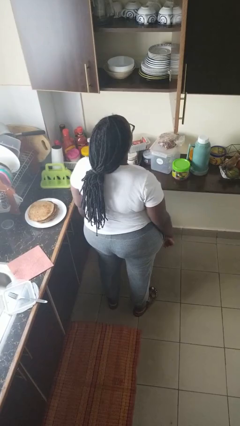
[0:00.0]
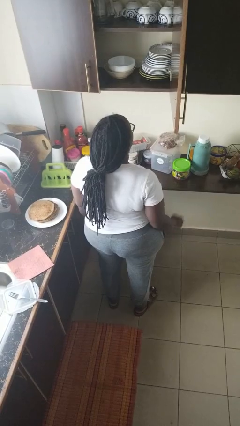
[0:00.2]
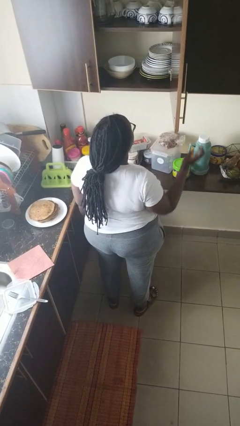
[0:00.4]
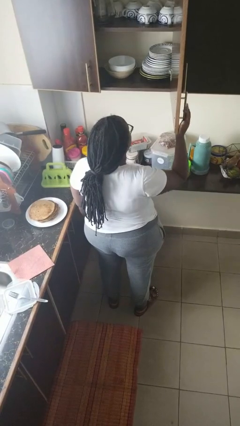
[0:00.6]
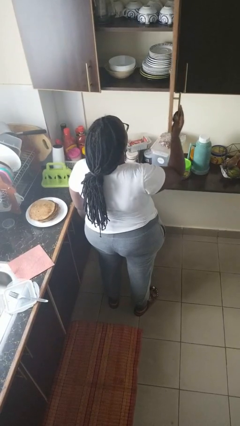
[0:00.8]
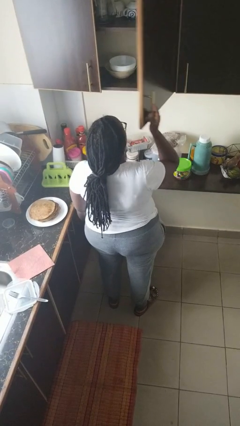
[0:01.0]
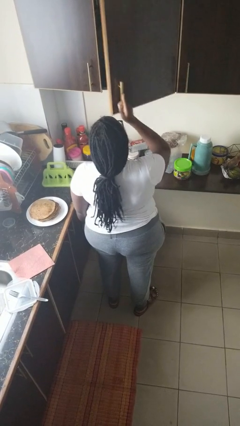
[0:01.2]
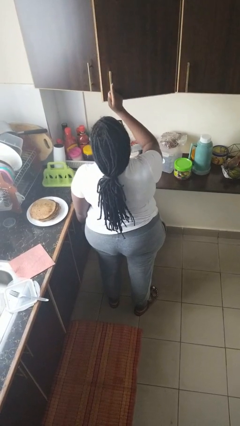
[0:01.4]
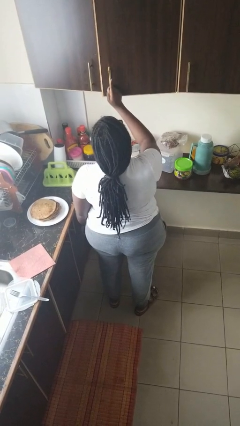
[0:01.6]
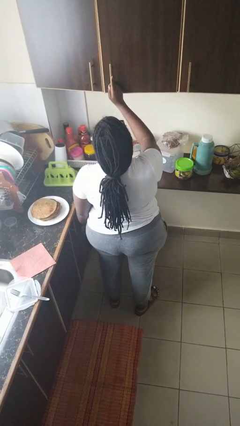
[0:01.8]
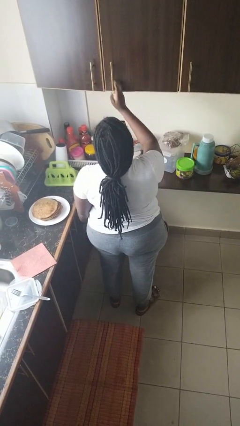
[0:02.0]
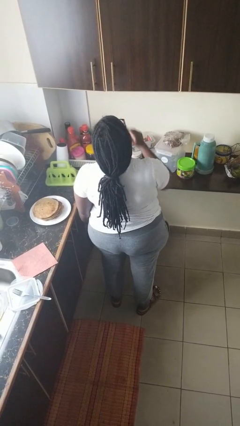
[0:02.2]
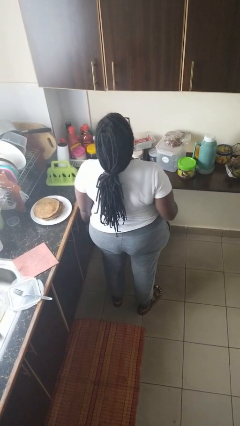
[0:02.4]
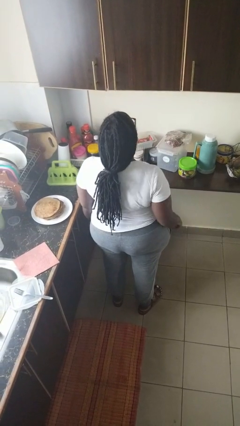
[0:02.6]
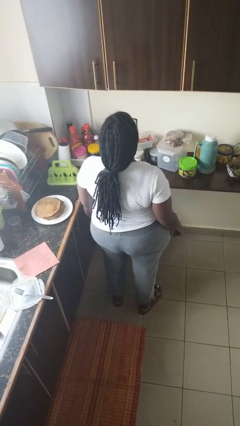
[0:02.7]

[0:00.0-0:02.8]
person closes cabinet

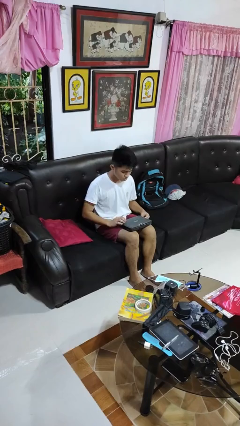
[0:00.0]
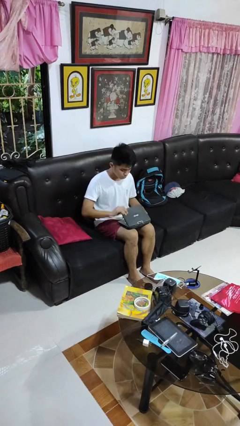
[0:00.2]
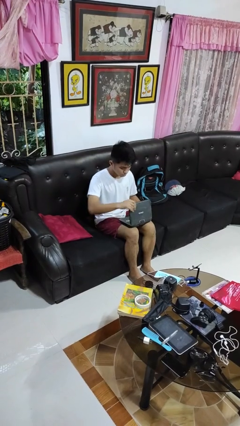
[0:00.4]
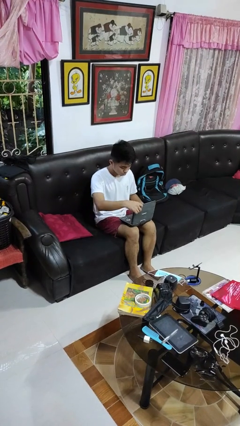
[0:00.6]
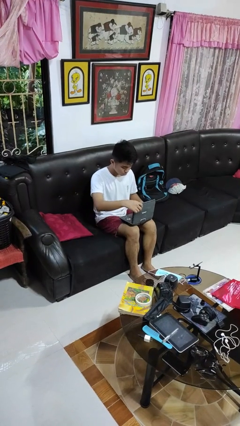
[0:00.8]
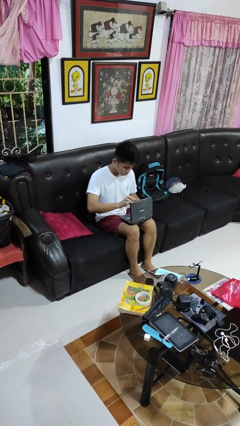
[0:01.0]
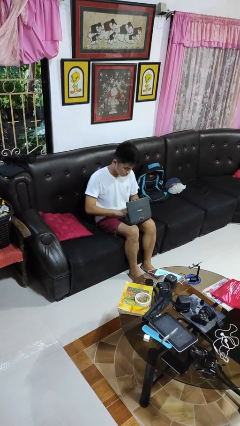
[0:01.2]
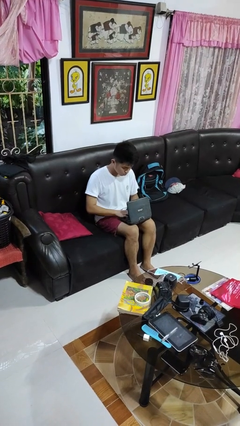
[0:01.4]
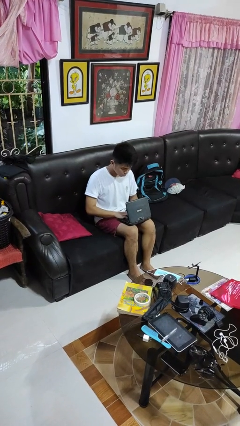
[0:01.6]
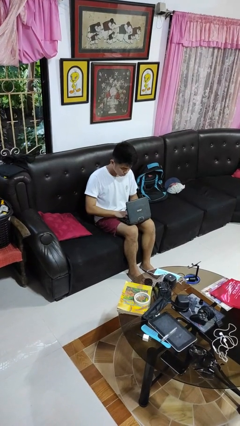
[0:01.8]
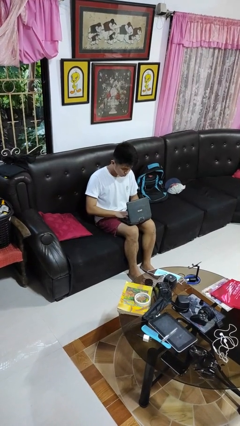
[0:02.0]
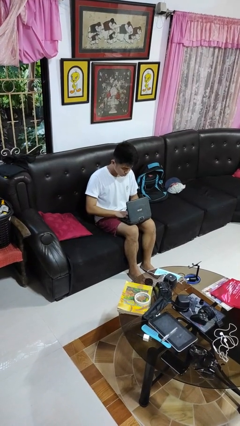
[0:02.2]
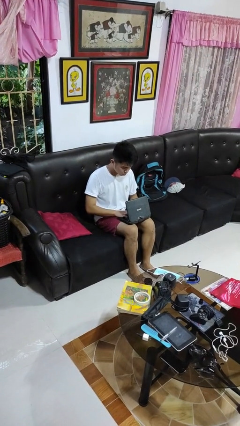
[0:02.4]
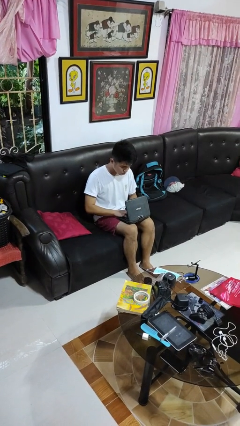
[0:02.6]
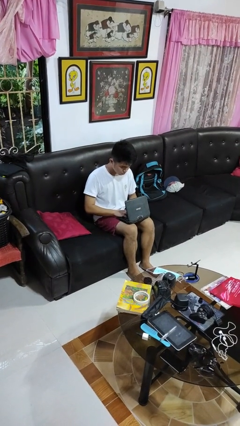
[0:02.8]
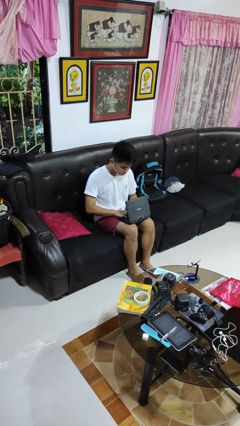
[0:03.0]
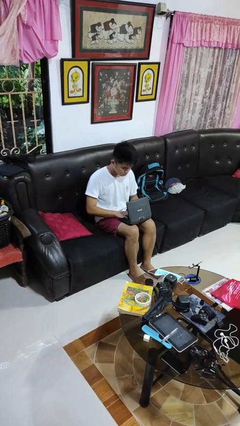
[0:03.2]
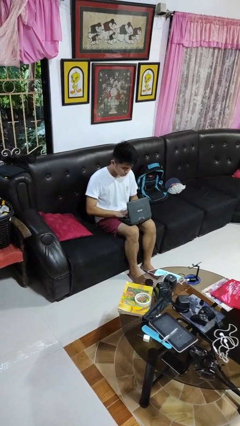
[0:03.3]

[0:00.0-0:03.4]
person opens laptop

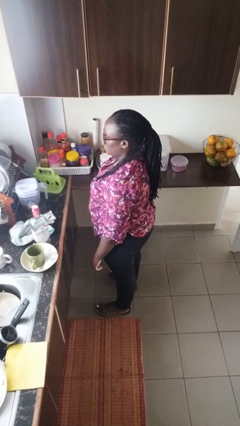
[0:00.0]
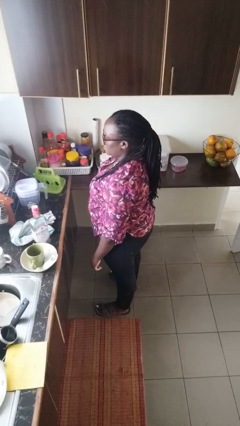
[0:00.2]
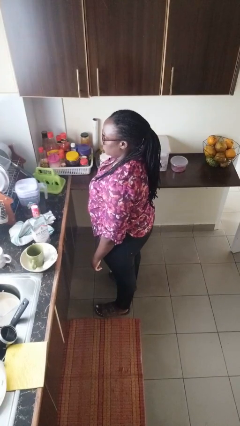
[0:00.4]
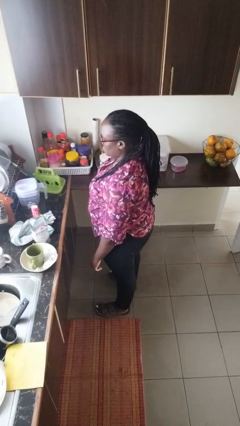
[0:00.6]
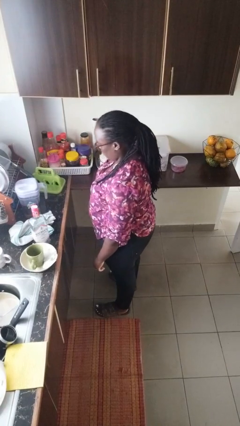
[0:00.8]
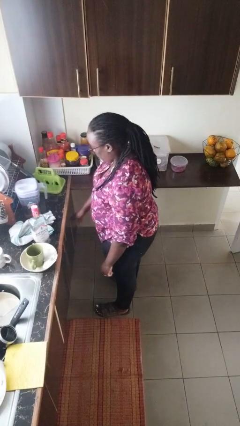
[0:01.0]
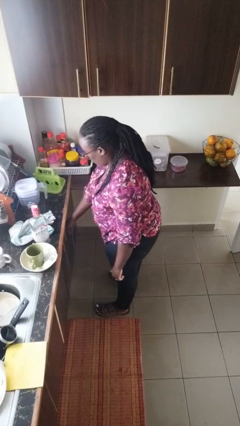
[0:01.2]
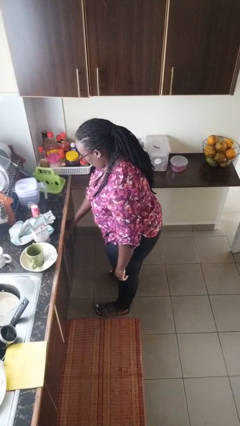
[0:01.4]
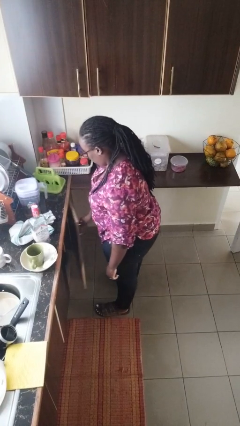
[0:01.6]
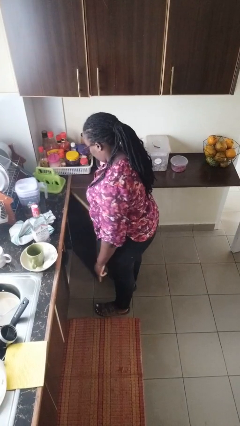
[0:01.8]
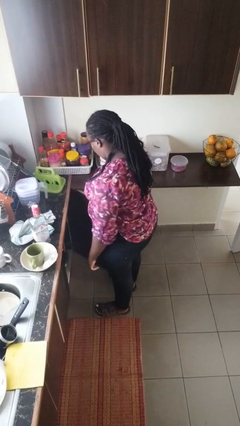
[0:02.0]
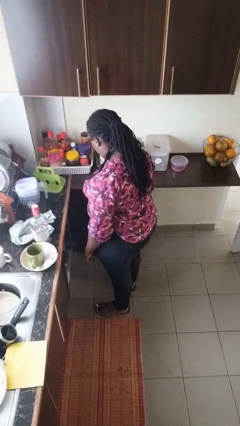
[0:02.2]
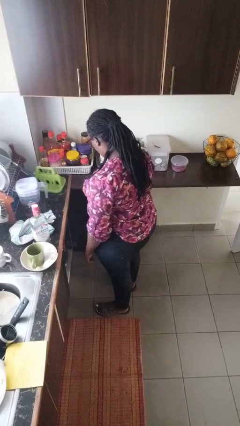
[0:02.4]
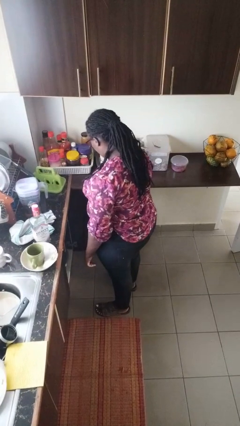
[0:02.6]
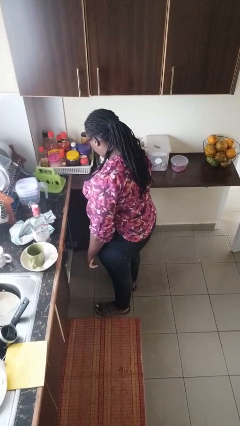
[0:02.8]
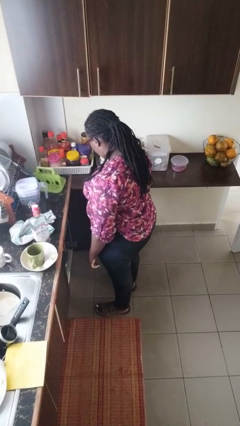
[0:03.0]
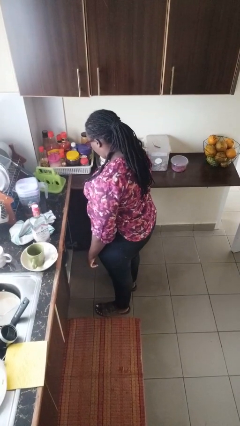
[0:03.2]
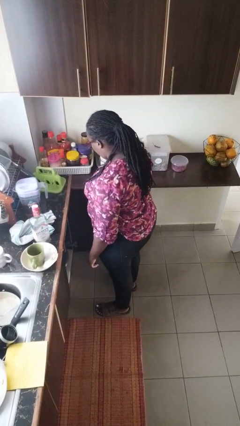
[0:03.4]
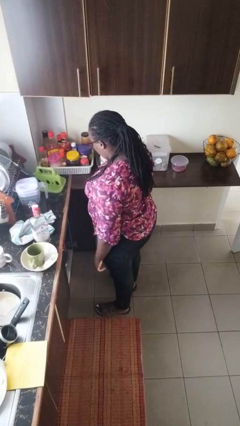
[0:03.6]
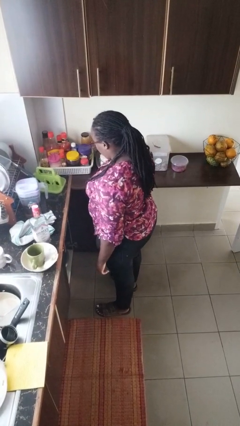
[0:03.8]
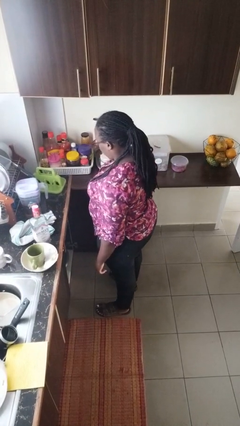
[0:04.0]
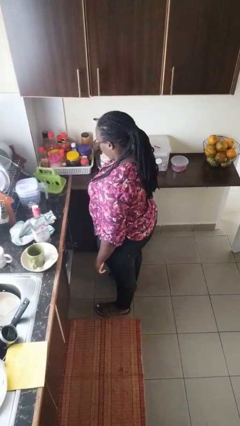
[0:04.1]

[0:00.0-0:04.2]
person opens cabinet

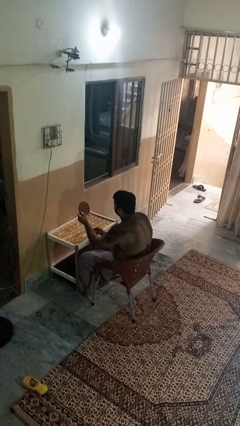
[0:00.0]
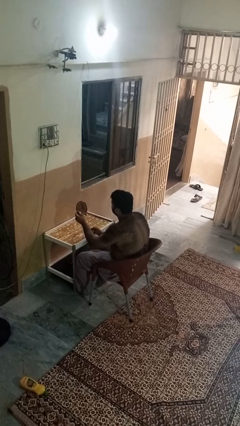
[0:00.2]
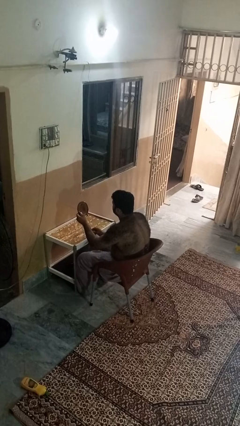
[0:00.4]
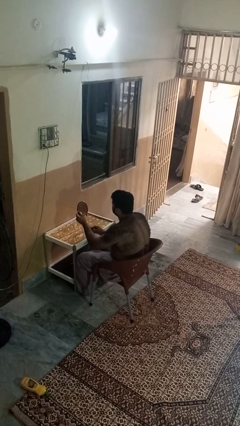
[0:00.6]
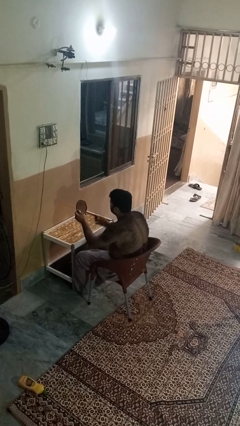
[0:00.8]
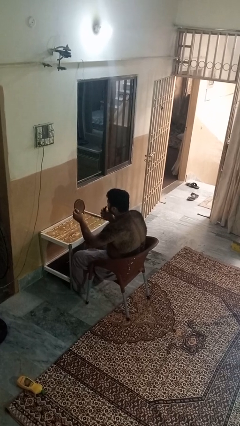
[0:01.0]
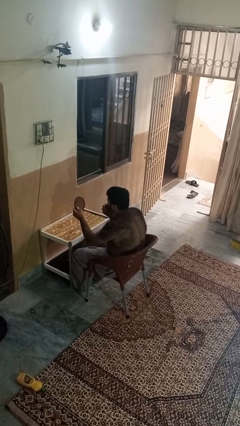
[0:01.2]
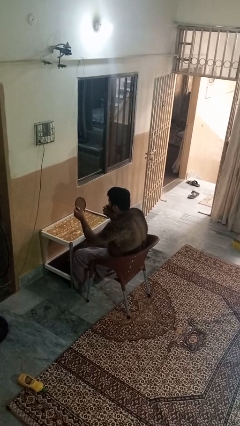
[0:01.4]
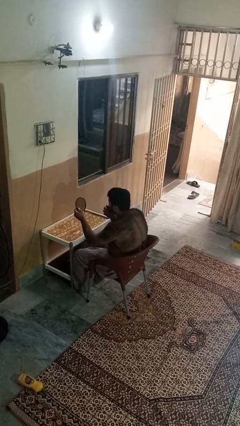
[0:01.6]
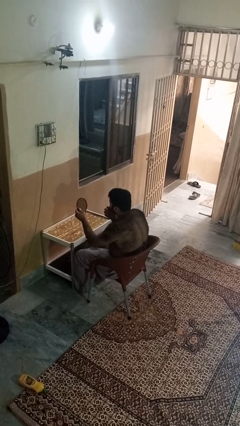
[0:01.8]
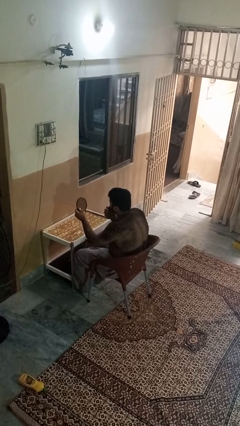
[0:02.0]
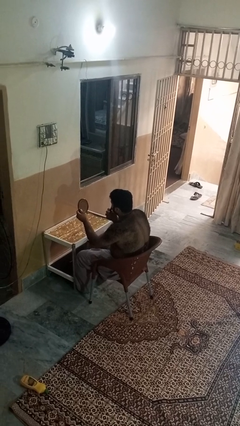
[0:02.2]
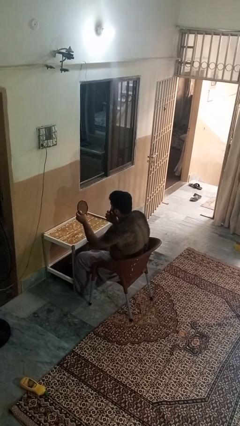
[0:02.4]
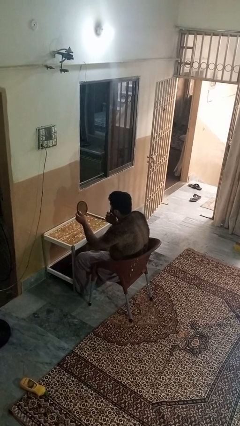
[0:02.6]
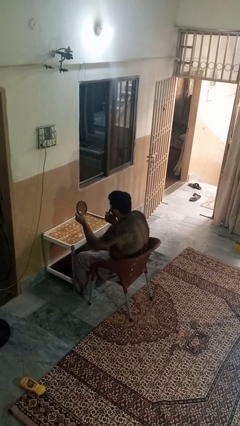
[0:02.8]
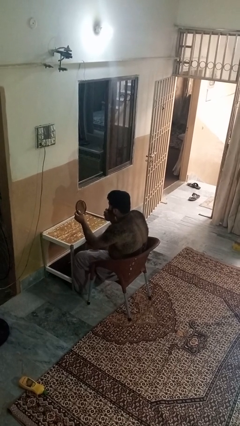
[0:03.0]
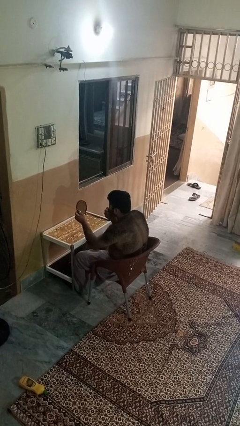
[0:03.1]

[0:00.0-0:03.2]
person applies lip makeup

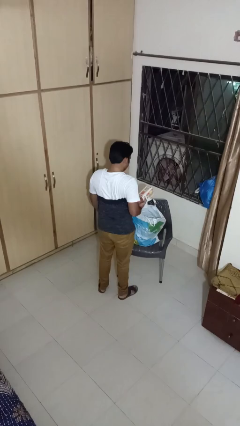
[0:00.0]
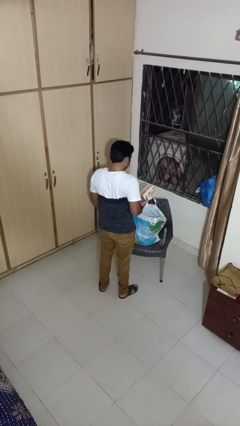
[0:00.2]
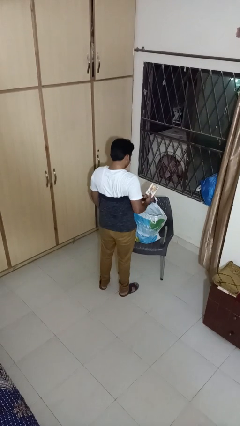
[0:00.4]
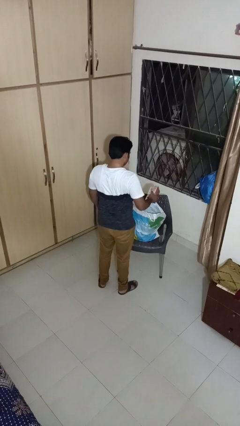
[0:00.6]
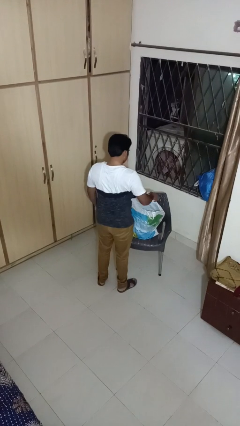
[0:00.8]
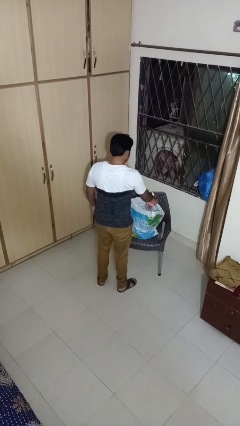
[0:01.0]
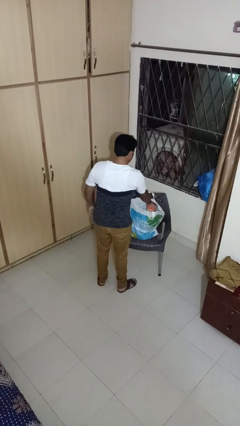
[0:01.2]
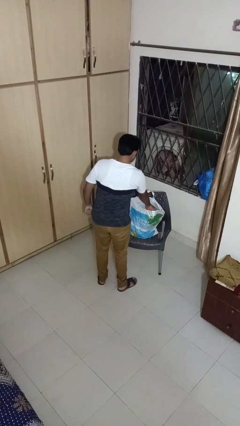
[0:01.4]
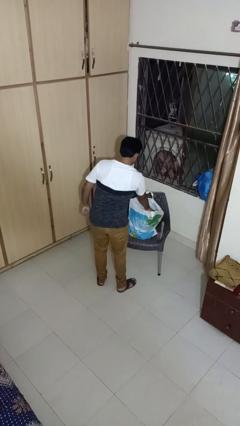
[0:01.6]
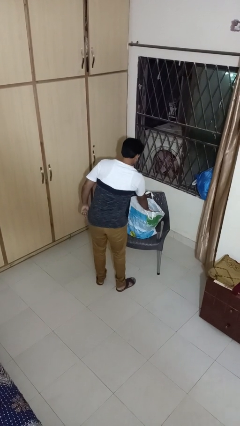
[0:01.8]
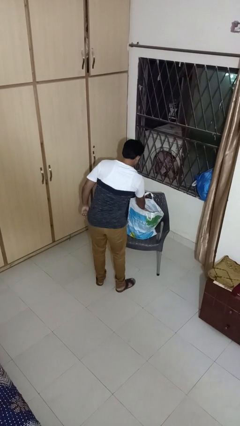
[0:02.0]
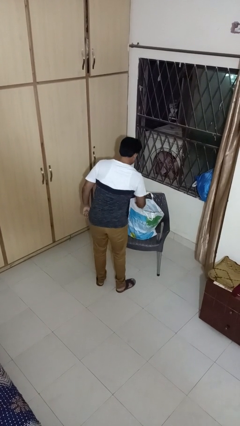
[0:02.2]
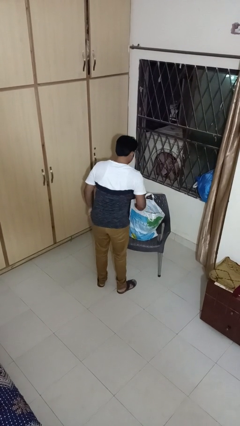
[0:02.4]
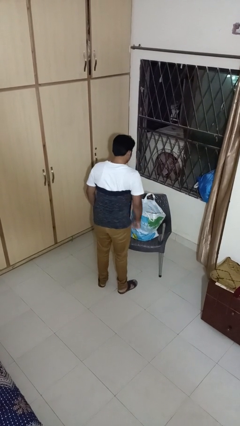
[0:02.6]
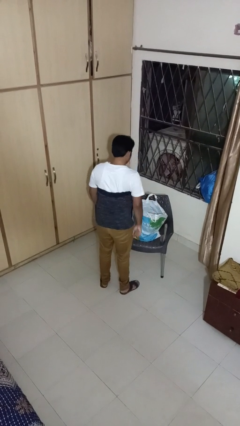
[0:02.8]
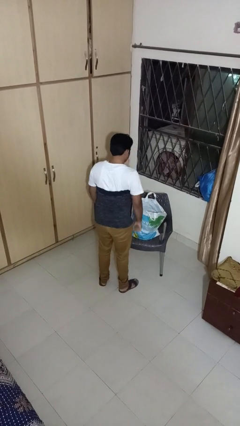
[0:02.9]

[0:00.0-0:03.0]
person puts object into bag

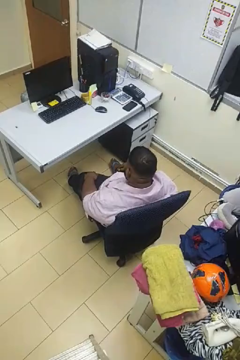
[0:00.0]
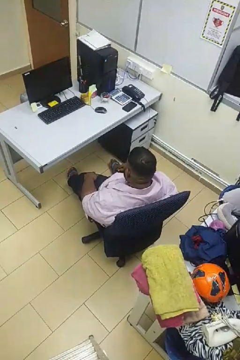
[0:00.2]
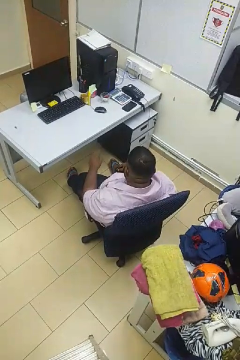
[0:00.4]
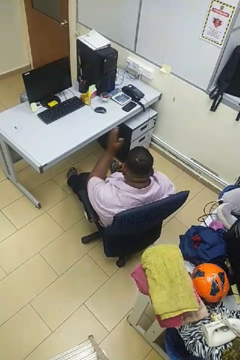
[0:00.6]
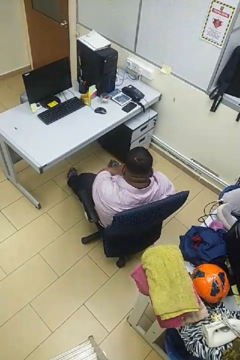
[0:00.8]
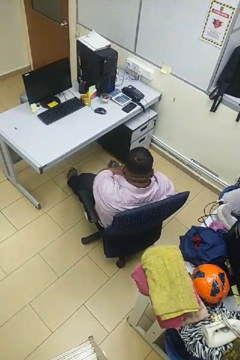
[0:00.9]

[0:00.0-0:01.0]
person swats bug
